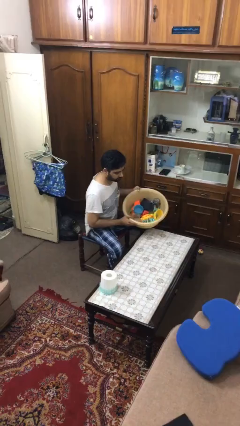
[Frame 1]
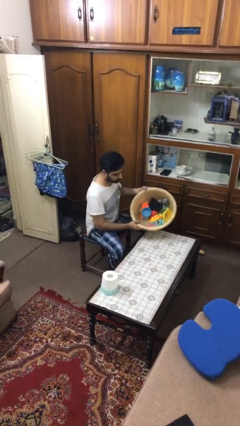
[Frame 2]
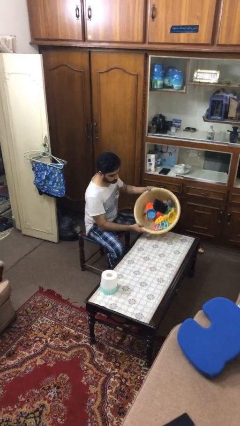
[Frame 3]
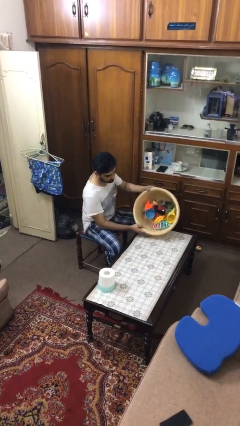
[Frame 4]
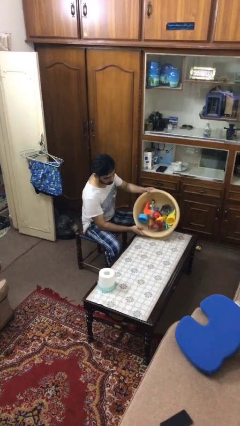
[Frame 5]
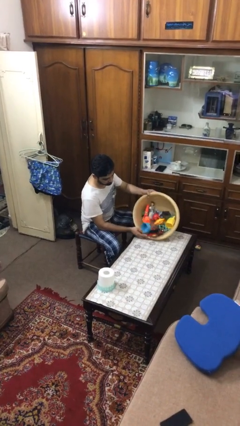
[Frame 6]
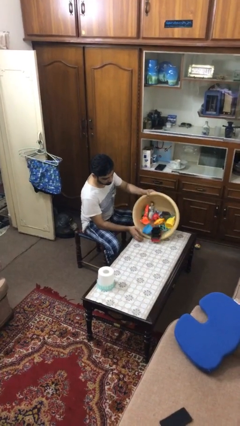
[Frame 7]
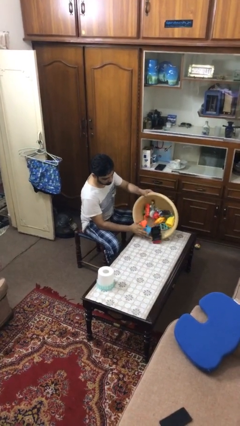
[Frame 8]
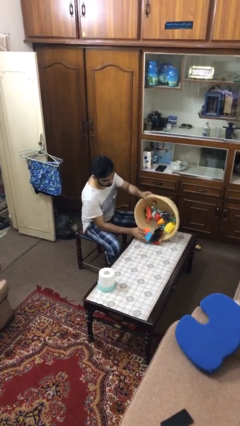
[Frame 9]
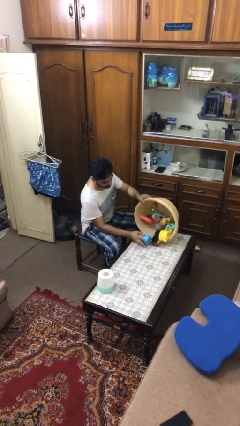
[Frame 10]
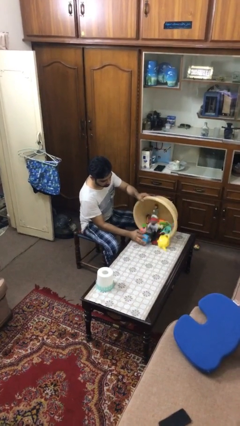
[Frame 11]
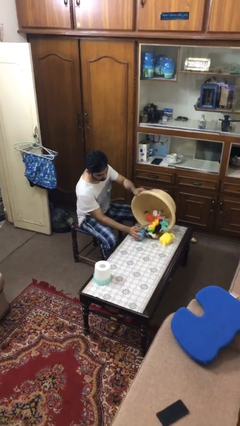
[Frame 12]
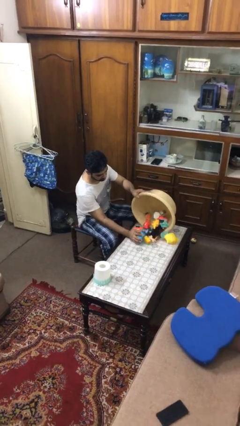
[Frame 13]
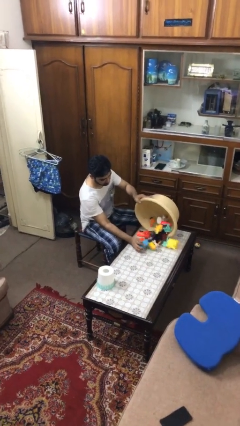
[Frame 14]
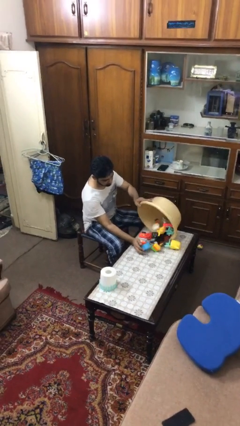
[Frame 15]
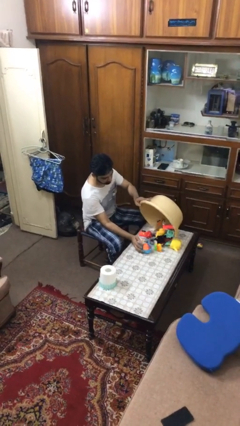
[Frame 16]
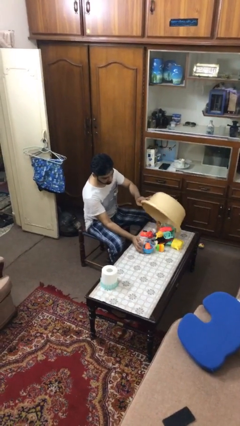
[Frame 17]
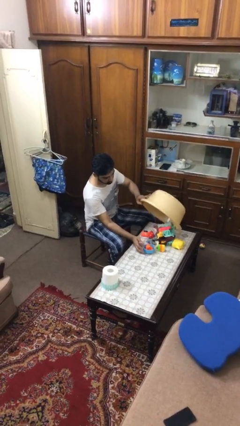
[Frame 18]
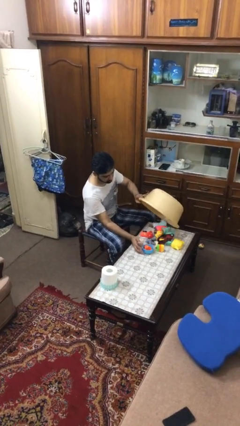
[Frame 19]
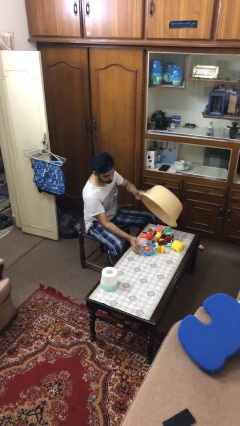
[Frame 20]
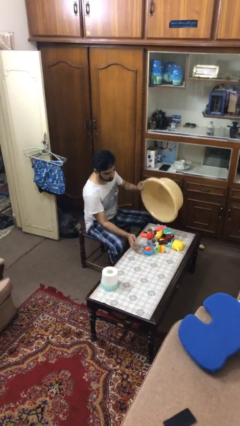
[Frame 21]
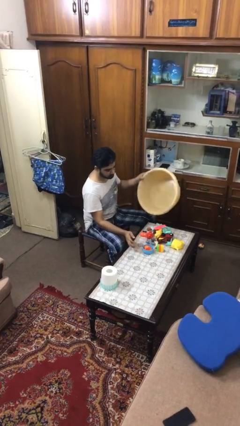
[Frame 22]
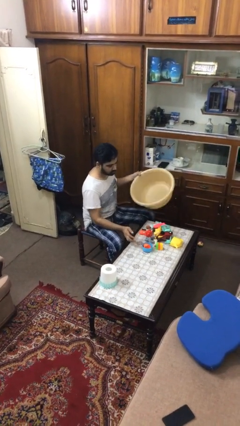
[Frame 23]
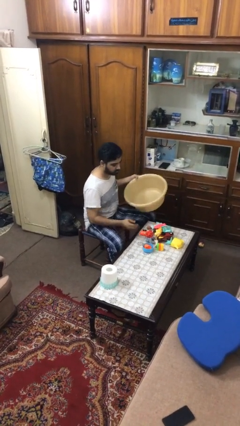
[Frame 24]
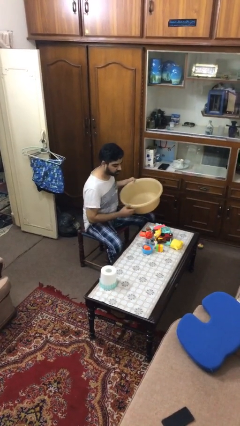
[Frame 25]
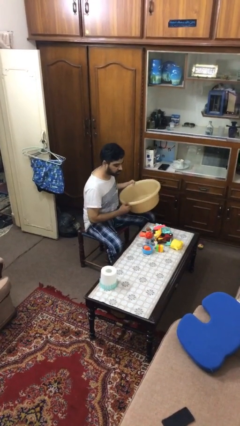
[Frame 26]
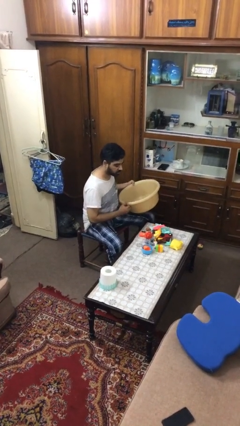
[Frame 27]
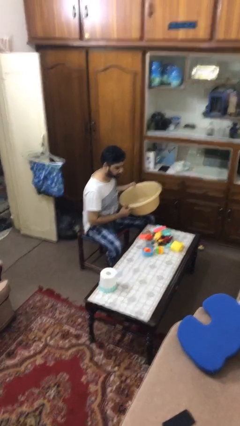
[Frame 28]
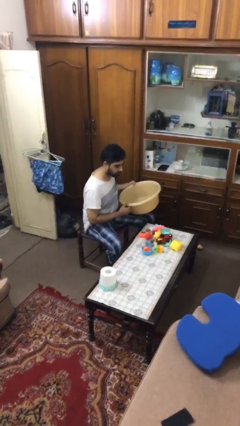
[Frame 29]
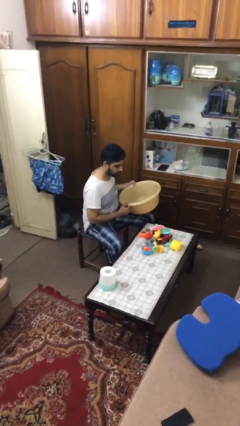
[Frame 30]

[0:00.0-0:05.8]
person unloads box onto table

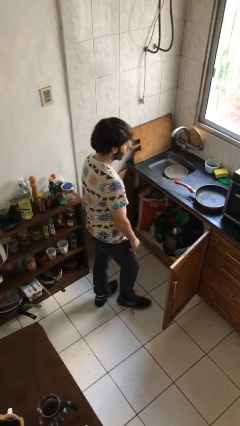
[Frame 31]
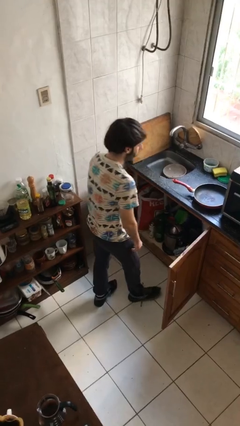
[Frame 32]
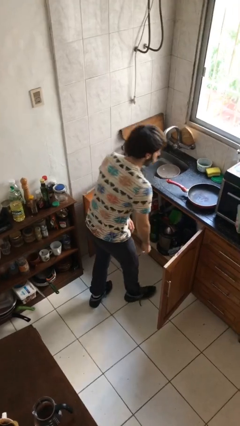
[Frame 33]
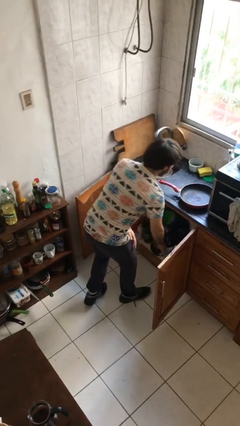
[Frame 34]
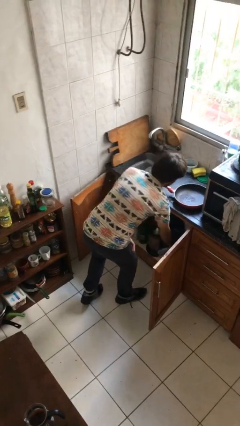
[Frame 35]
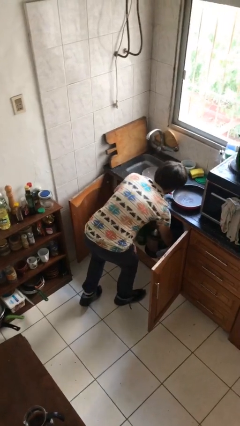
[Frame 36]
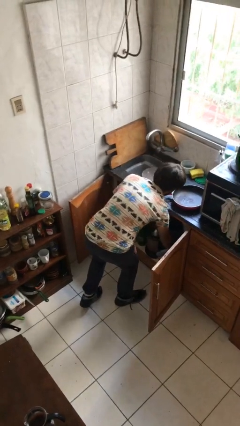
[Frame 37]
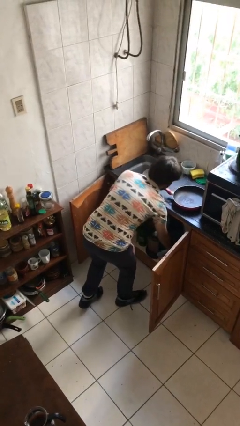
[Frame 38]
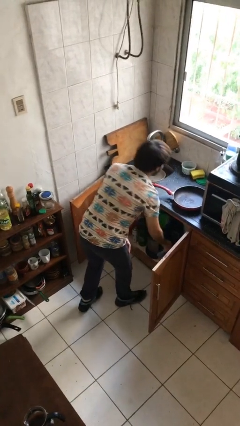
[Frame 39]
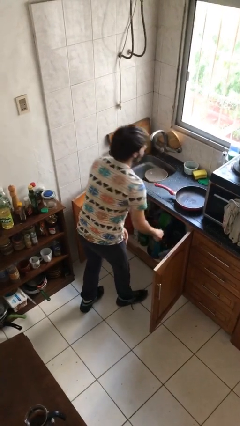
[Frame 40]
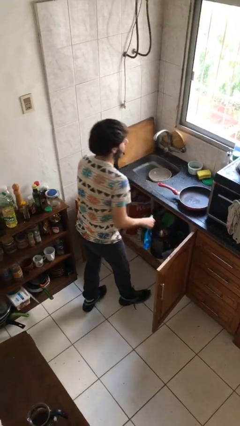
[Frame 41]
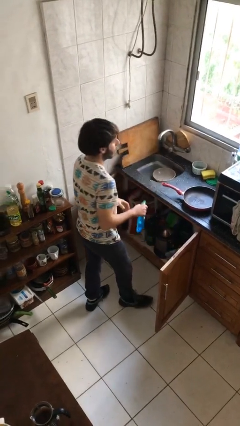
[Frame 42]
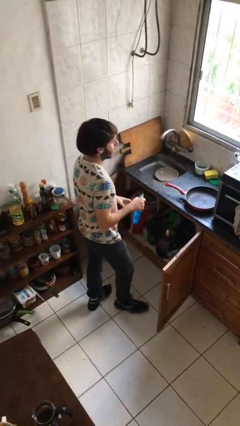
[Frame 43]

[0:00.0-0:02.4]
person picks up object from cabinet

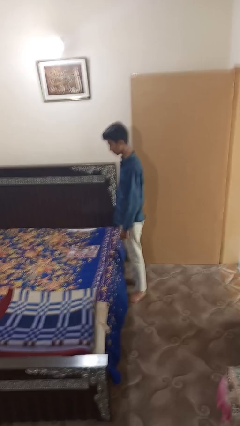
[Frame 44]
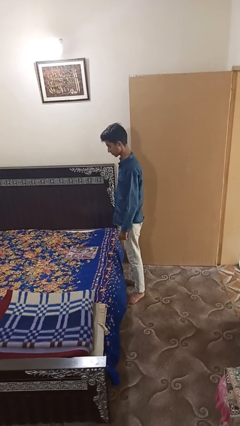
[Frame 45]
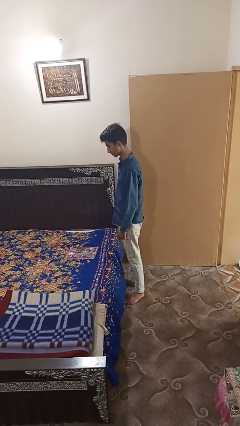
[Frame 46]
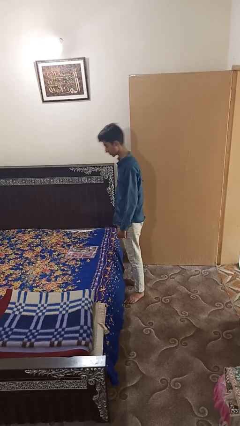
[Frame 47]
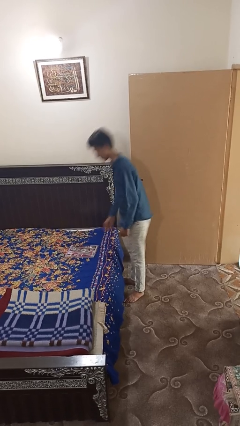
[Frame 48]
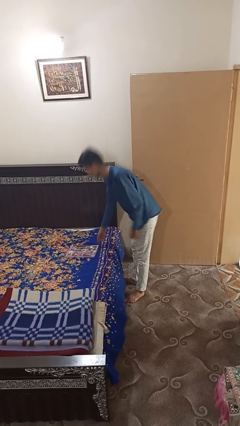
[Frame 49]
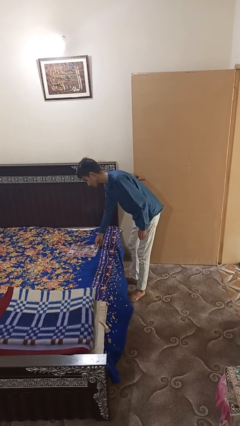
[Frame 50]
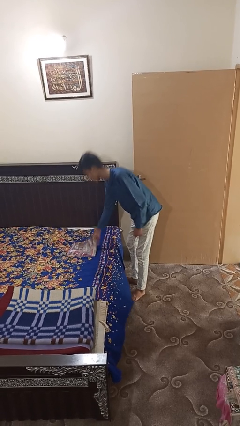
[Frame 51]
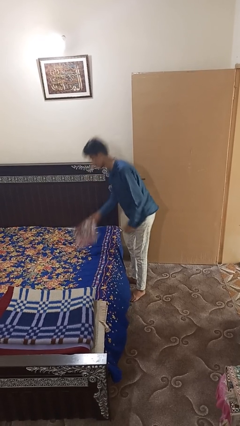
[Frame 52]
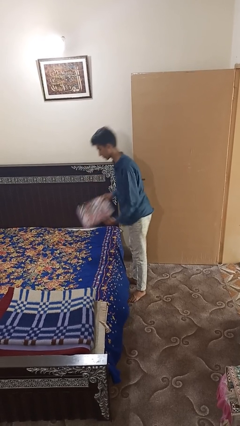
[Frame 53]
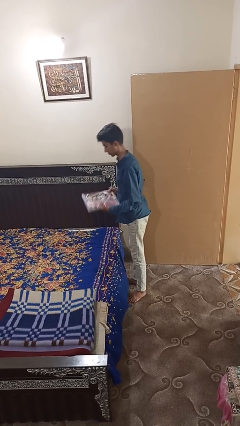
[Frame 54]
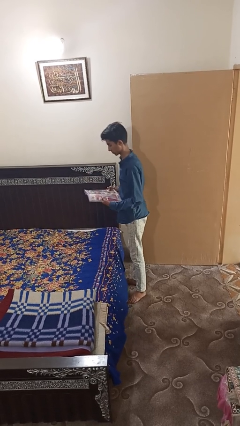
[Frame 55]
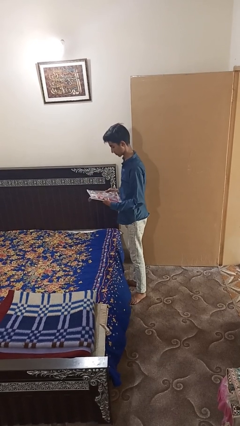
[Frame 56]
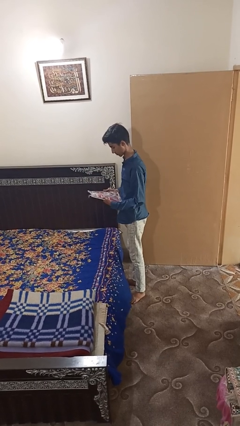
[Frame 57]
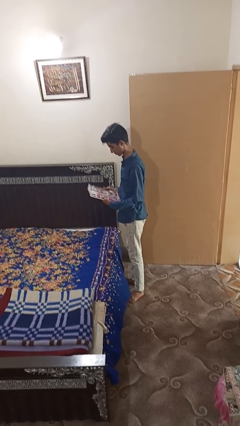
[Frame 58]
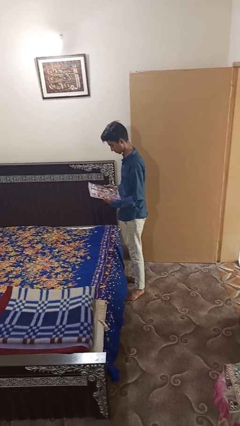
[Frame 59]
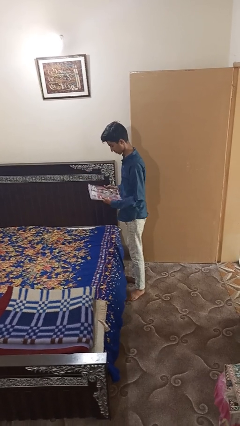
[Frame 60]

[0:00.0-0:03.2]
person picks up object from bed

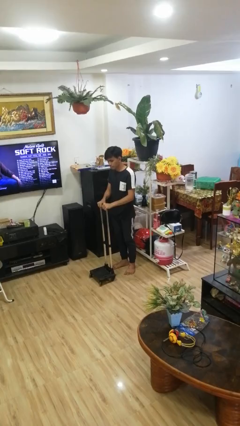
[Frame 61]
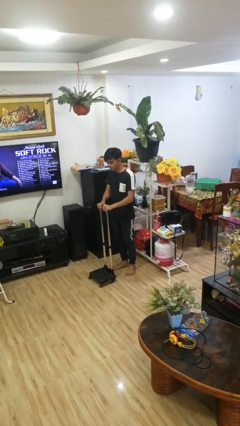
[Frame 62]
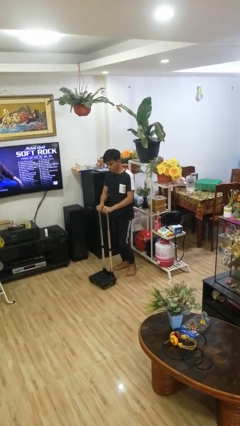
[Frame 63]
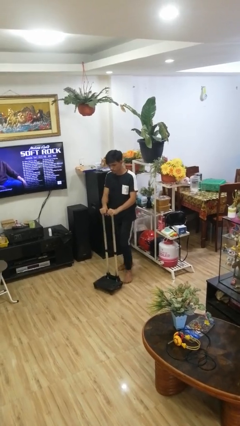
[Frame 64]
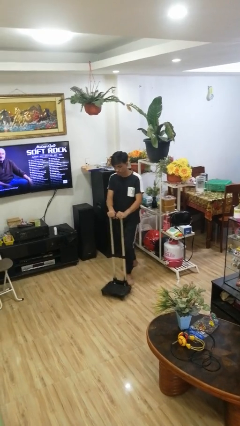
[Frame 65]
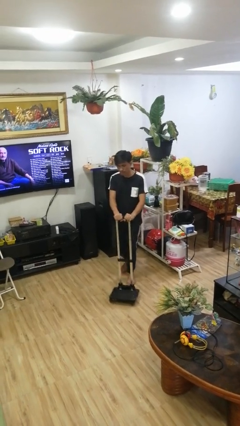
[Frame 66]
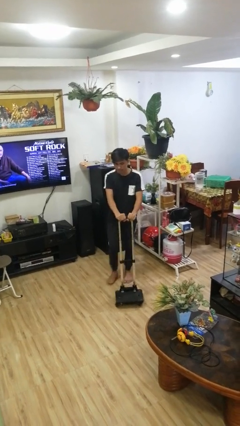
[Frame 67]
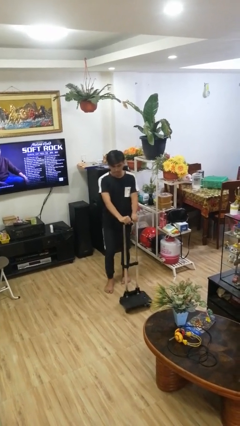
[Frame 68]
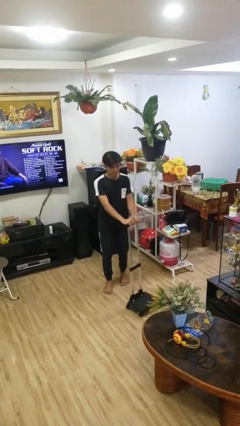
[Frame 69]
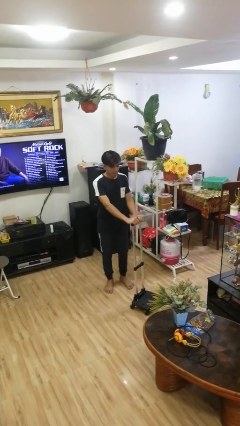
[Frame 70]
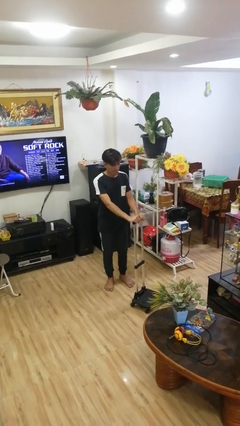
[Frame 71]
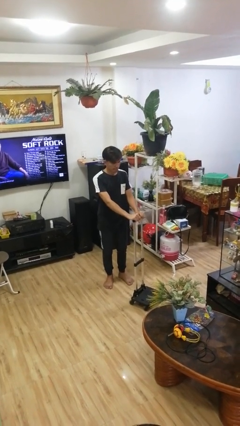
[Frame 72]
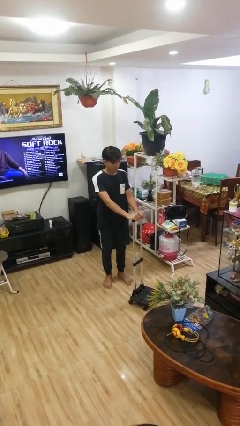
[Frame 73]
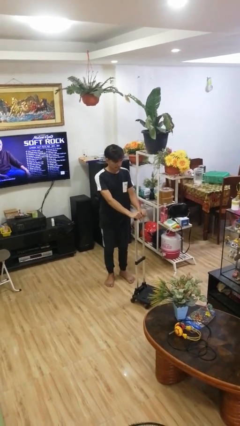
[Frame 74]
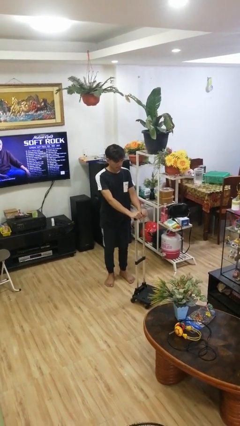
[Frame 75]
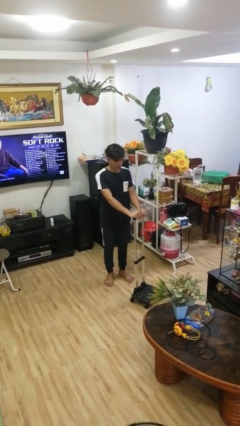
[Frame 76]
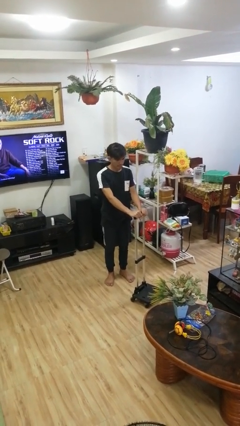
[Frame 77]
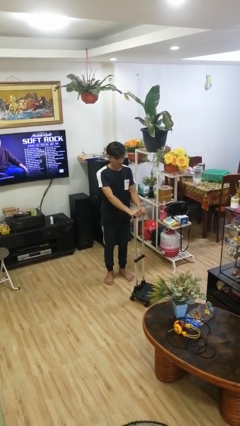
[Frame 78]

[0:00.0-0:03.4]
person pushes wheeled cart

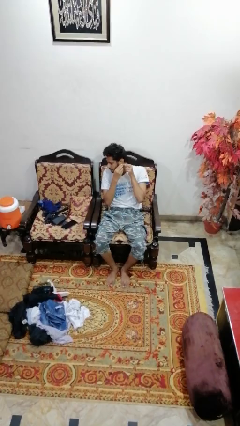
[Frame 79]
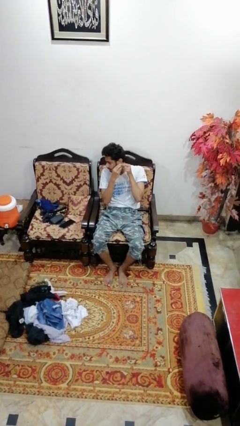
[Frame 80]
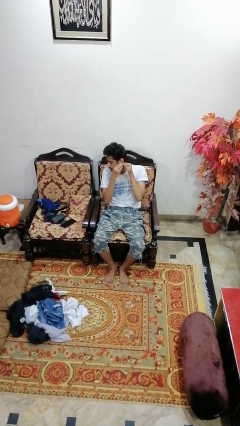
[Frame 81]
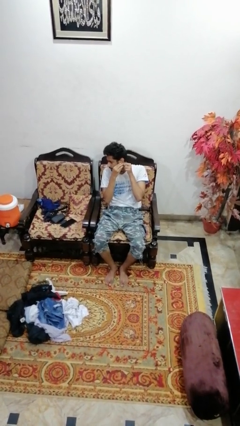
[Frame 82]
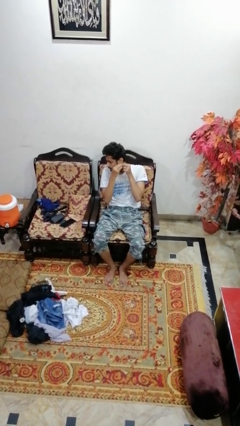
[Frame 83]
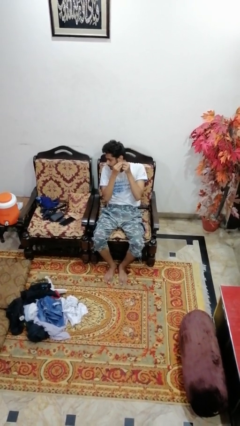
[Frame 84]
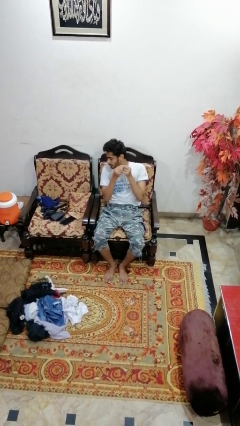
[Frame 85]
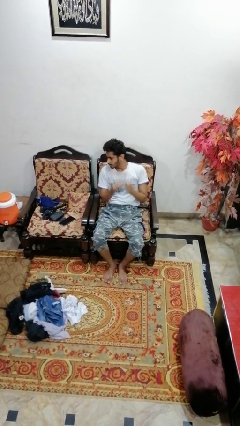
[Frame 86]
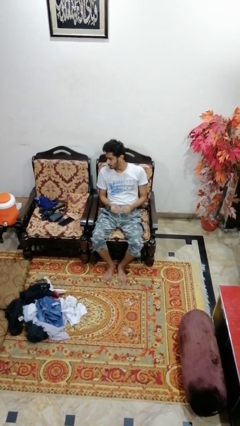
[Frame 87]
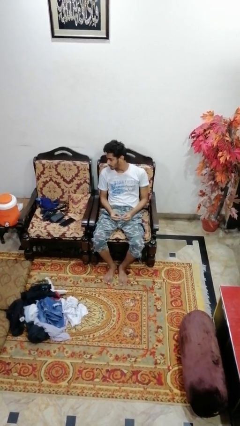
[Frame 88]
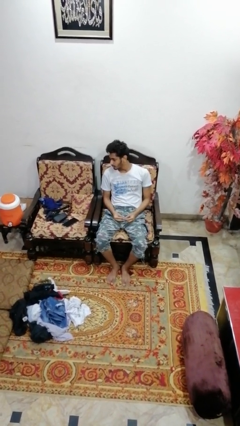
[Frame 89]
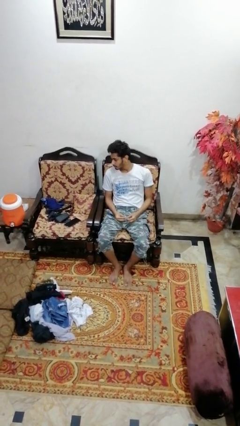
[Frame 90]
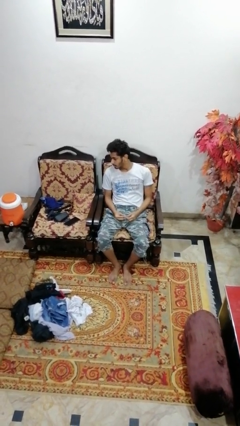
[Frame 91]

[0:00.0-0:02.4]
person takes off earrings
